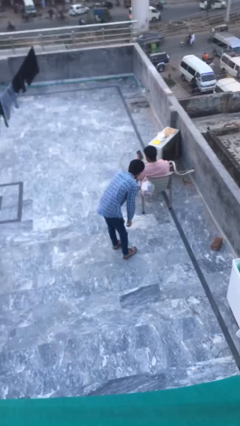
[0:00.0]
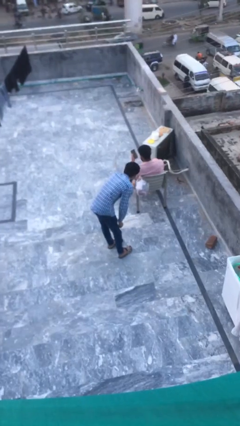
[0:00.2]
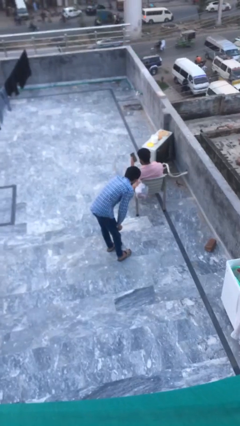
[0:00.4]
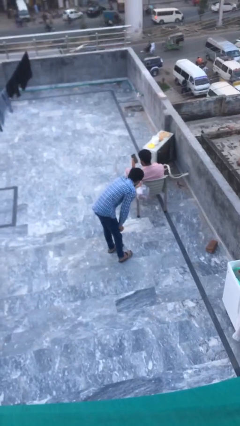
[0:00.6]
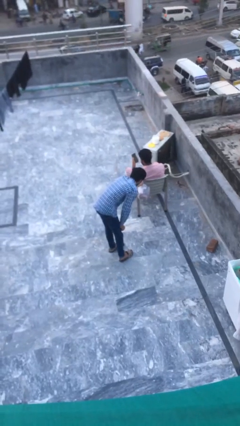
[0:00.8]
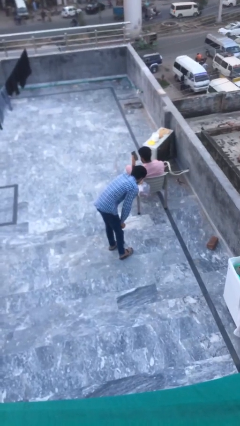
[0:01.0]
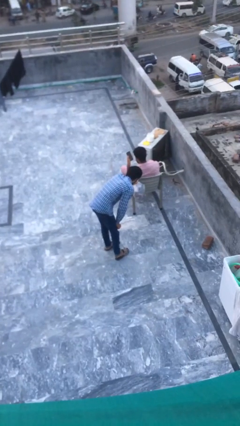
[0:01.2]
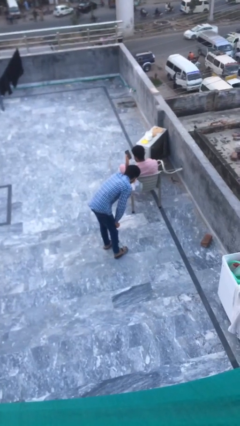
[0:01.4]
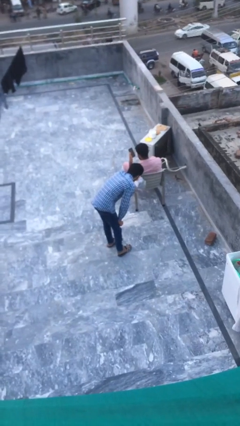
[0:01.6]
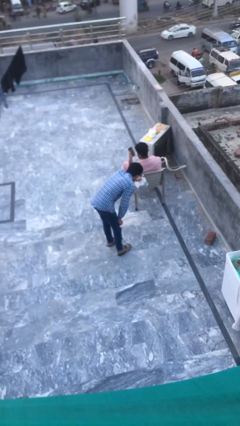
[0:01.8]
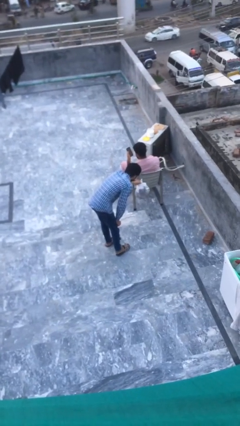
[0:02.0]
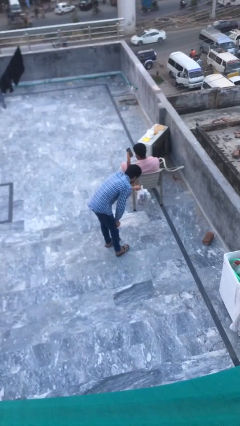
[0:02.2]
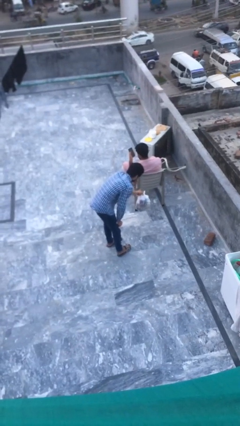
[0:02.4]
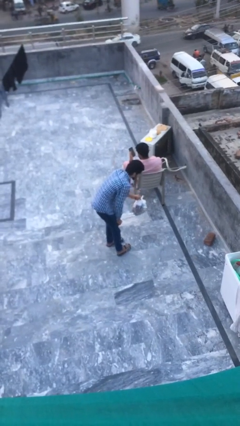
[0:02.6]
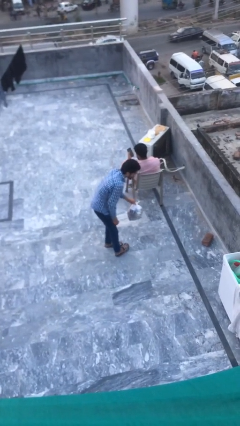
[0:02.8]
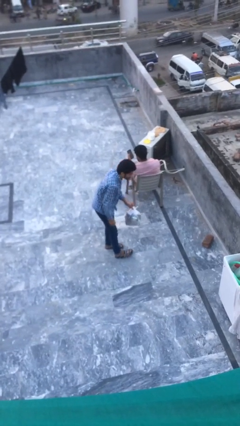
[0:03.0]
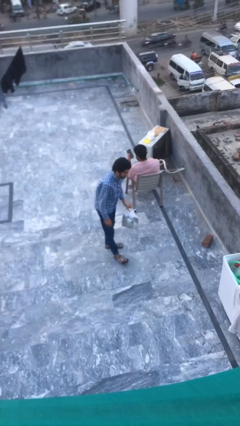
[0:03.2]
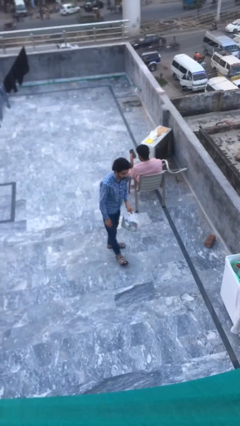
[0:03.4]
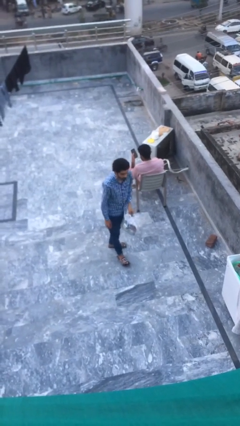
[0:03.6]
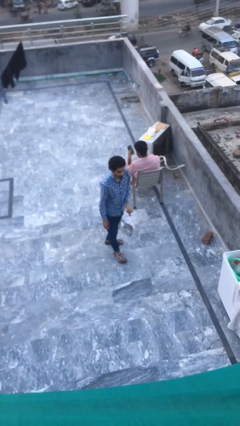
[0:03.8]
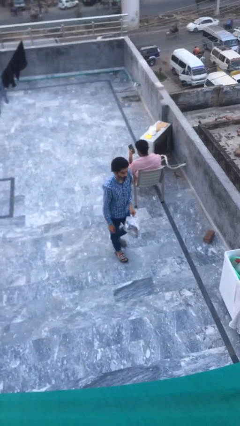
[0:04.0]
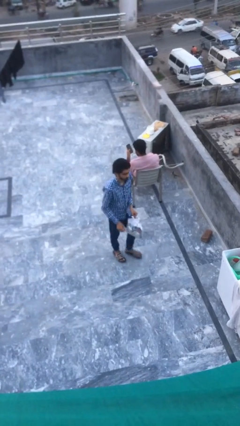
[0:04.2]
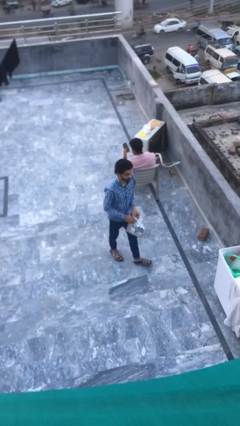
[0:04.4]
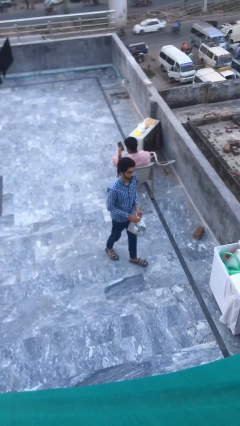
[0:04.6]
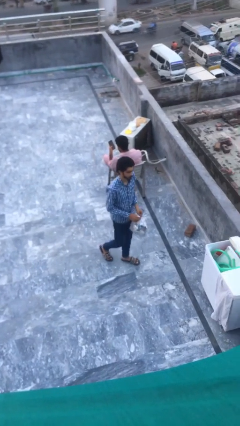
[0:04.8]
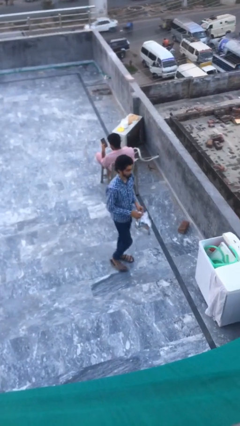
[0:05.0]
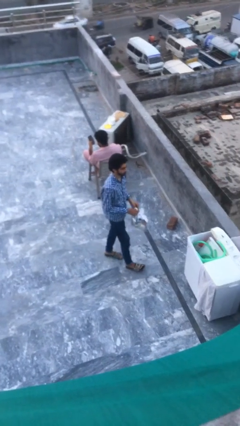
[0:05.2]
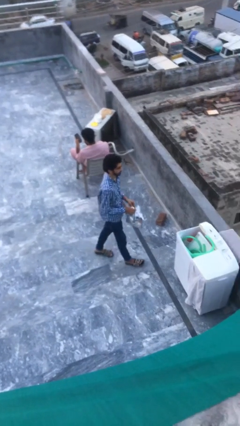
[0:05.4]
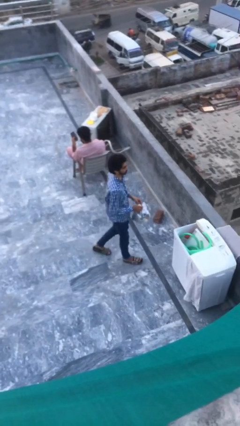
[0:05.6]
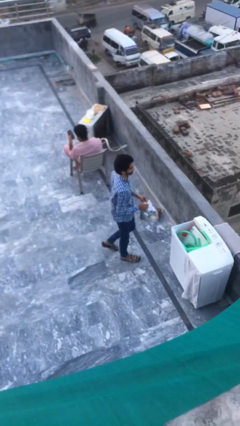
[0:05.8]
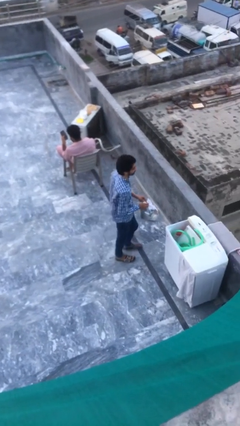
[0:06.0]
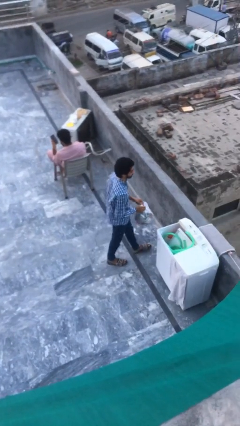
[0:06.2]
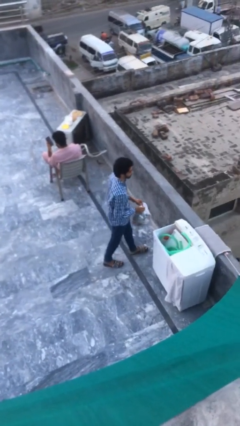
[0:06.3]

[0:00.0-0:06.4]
person steals object from person

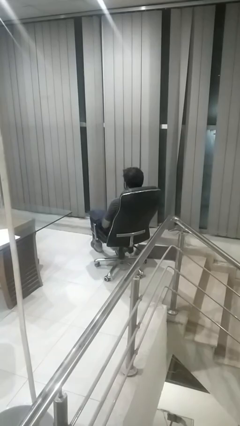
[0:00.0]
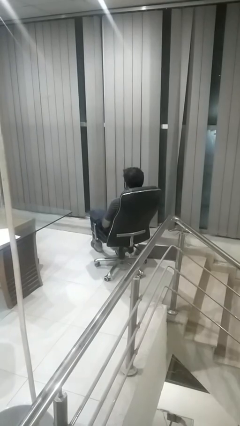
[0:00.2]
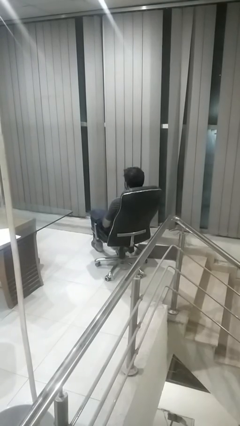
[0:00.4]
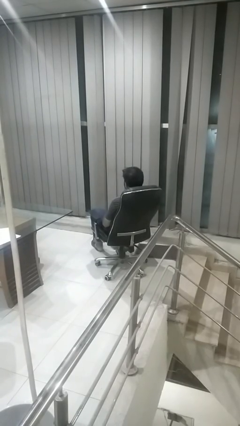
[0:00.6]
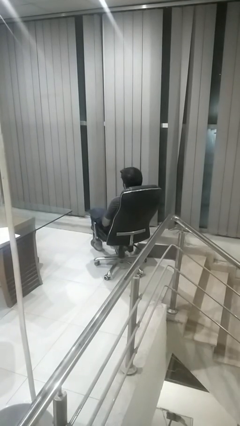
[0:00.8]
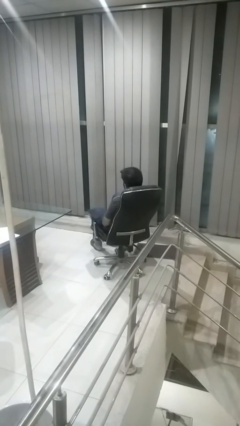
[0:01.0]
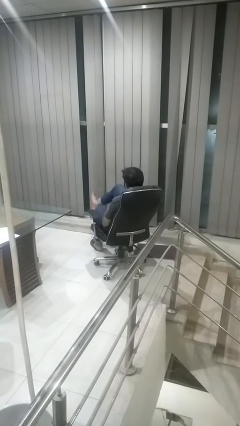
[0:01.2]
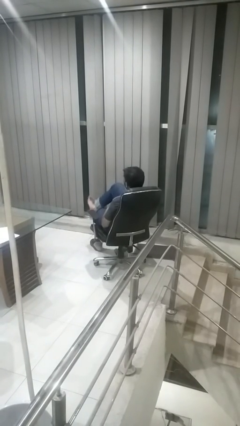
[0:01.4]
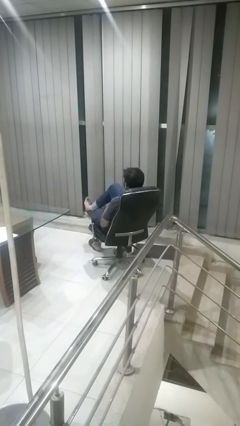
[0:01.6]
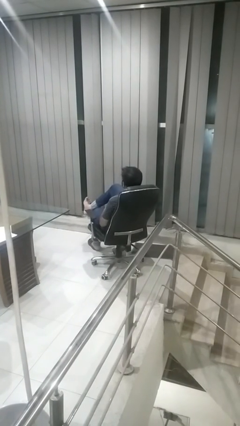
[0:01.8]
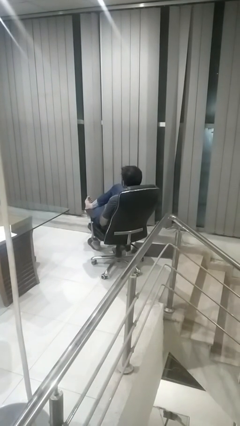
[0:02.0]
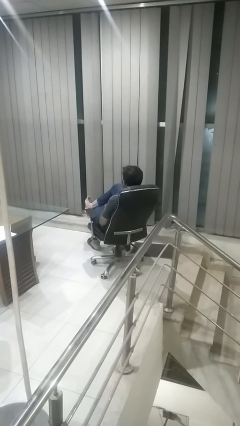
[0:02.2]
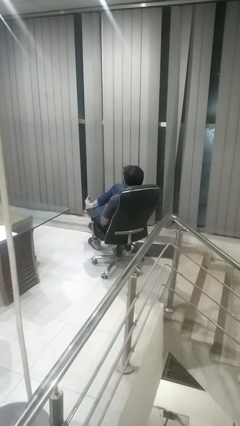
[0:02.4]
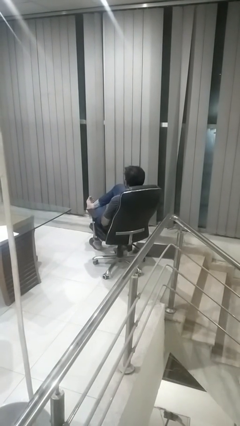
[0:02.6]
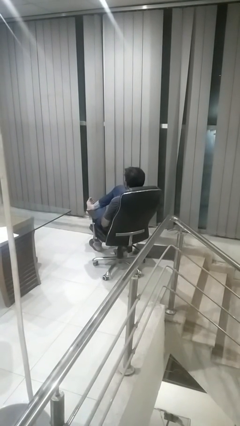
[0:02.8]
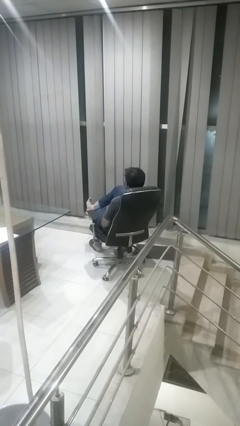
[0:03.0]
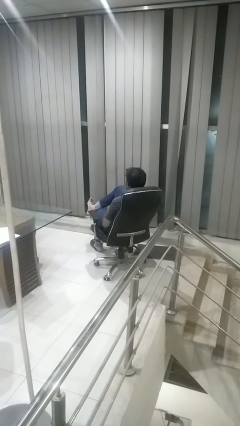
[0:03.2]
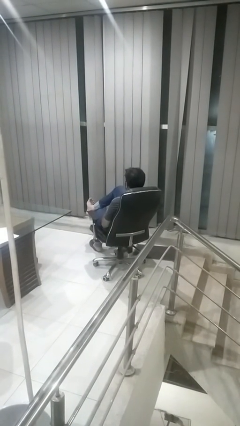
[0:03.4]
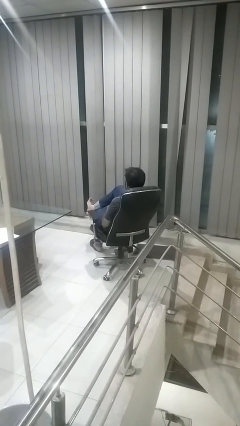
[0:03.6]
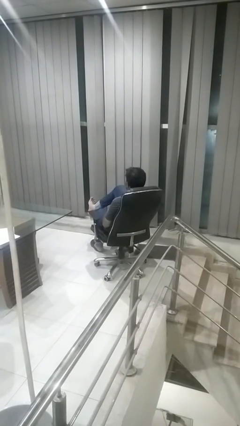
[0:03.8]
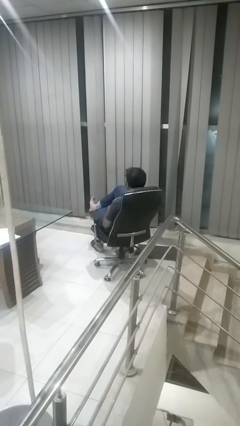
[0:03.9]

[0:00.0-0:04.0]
person crosses legs

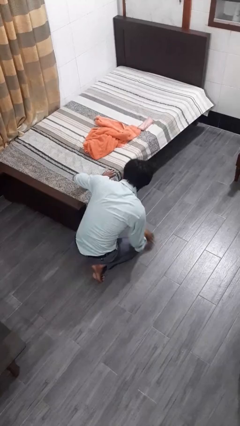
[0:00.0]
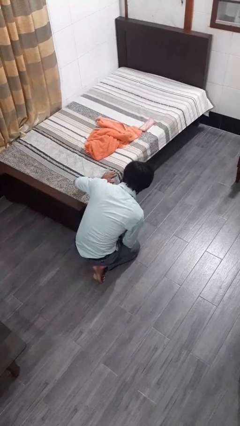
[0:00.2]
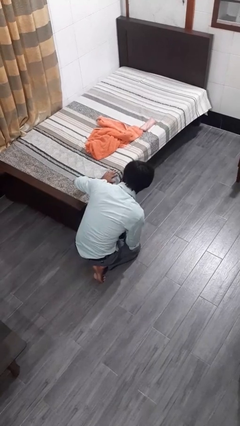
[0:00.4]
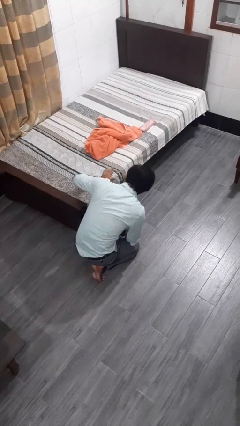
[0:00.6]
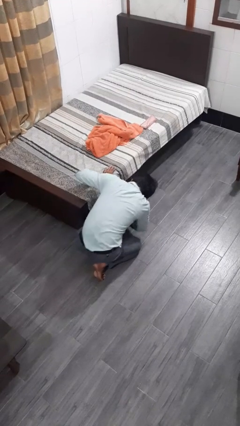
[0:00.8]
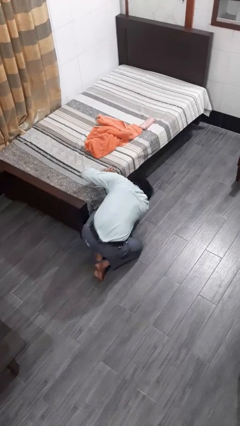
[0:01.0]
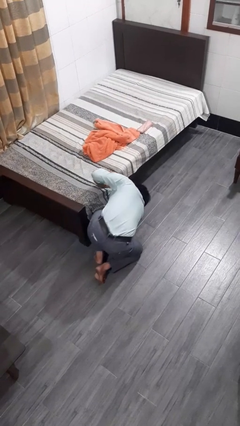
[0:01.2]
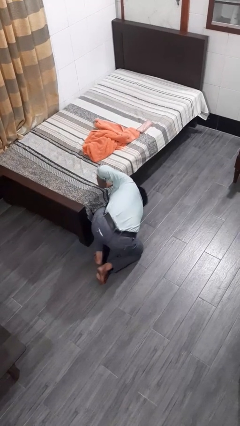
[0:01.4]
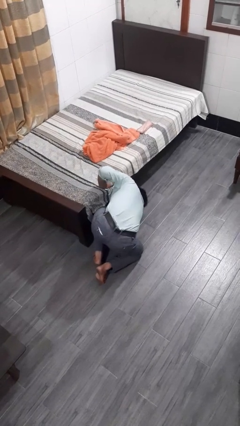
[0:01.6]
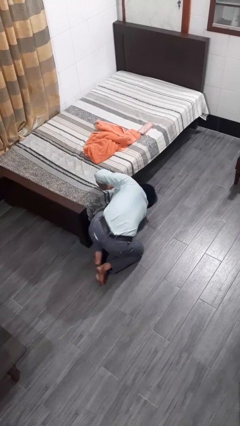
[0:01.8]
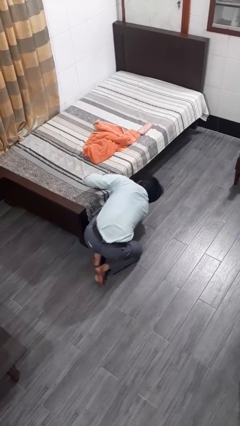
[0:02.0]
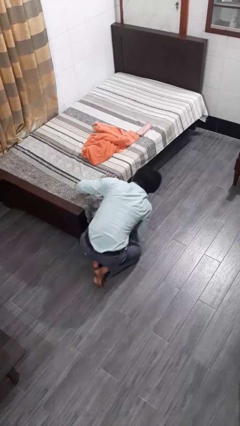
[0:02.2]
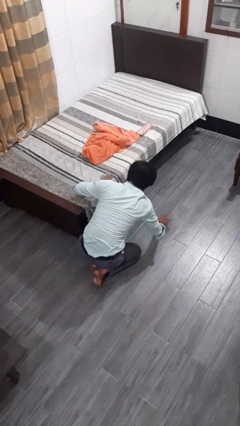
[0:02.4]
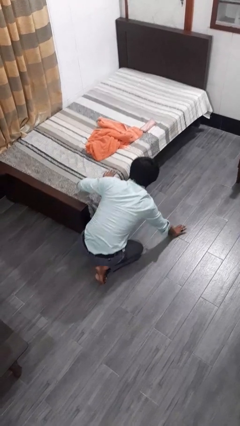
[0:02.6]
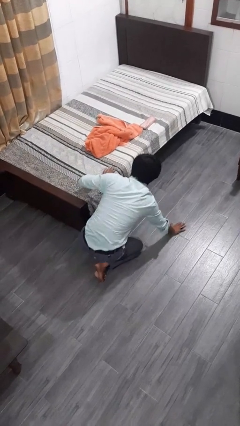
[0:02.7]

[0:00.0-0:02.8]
person searches under bed

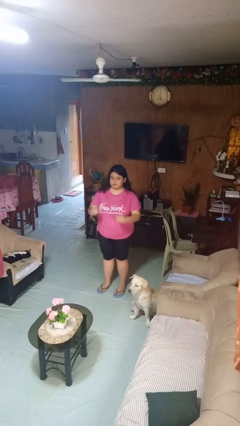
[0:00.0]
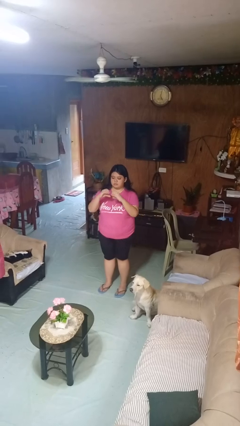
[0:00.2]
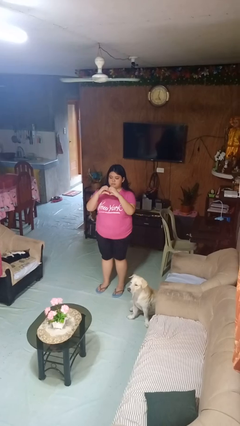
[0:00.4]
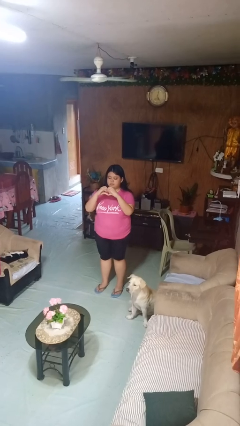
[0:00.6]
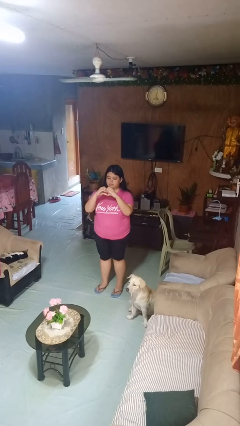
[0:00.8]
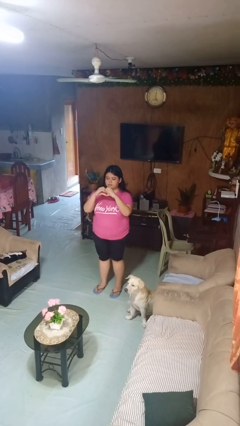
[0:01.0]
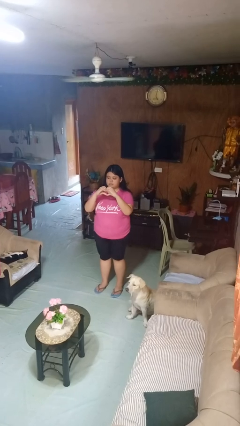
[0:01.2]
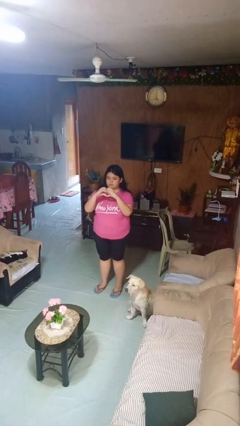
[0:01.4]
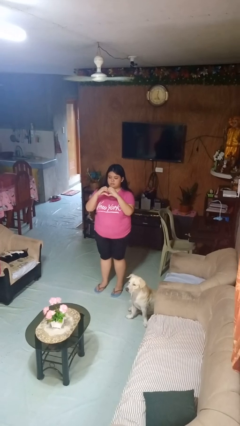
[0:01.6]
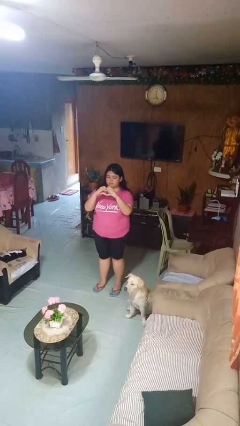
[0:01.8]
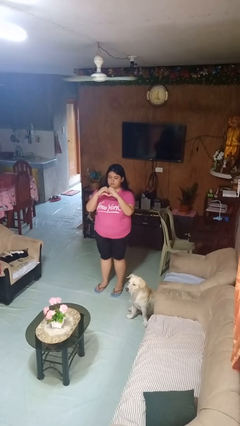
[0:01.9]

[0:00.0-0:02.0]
person gestures heart

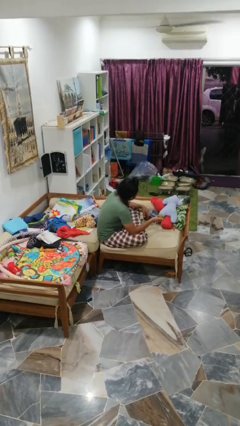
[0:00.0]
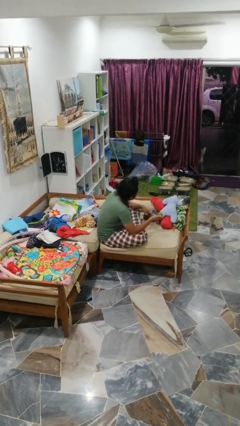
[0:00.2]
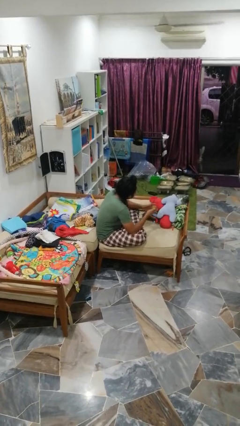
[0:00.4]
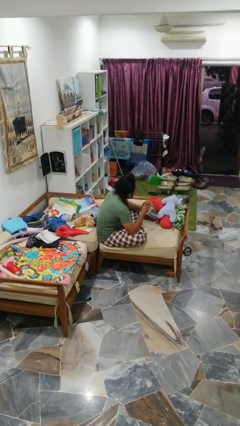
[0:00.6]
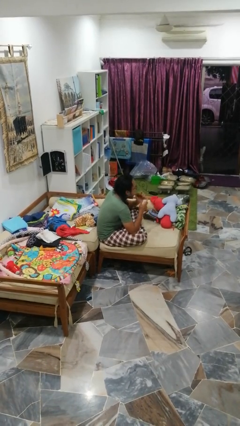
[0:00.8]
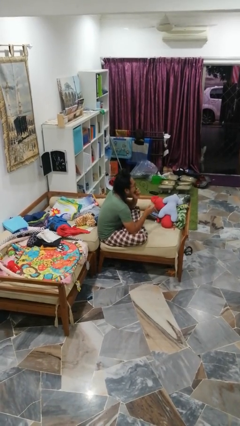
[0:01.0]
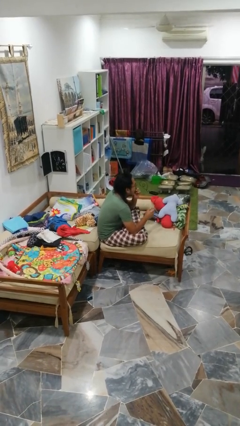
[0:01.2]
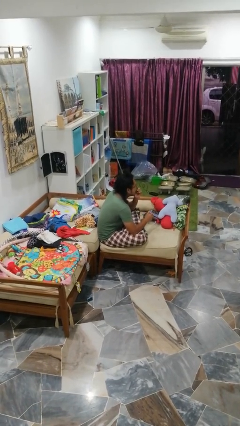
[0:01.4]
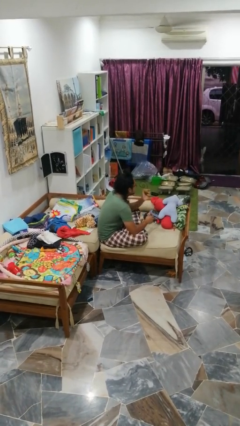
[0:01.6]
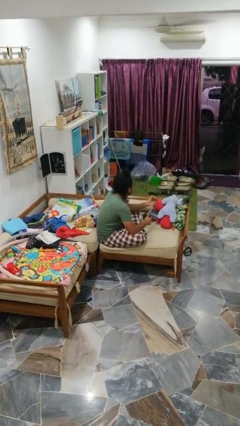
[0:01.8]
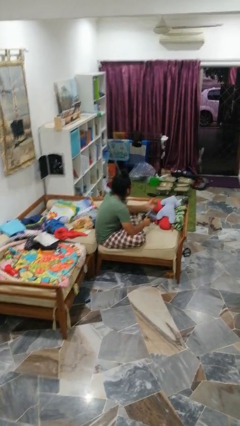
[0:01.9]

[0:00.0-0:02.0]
person eats apple

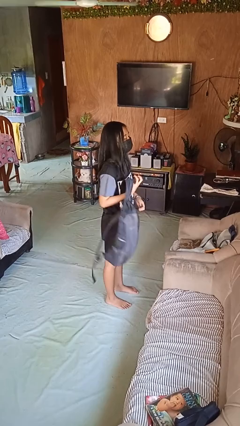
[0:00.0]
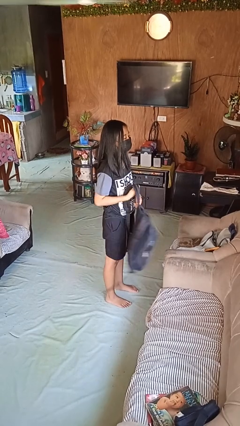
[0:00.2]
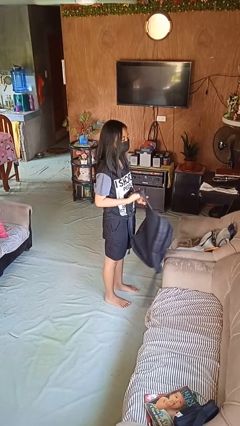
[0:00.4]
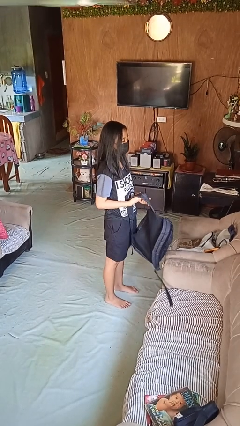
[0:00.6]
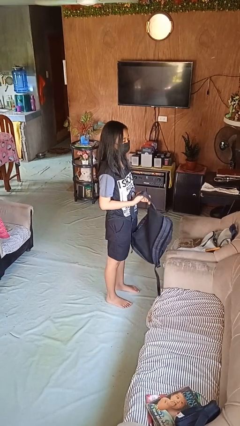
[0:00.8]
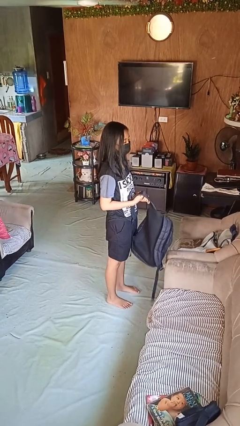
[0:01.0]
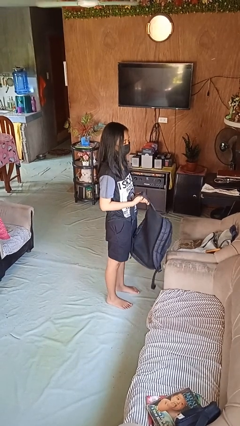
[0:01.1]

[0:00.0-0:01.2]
person takes off backpack
